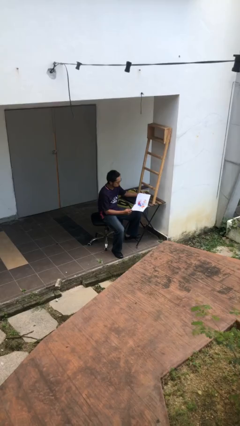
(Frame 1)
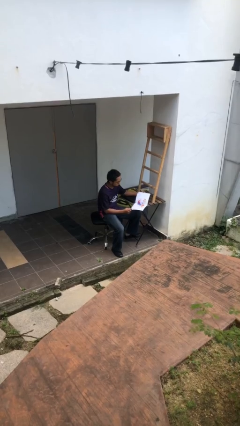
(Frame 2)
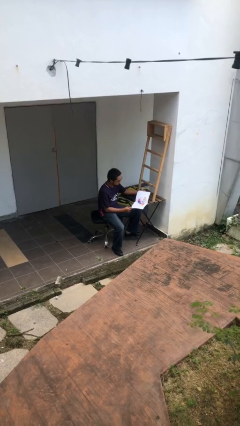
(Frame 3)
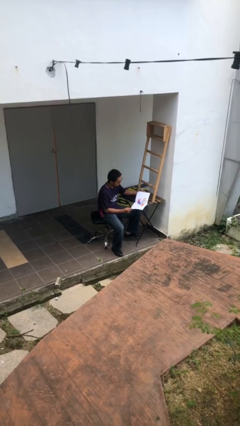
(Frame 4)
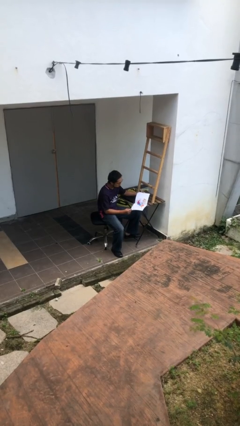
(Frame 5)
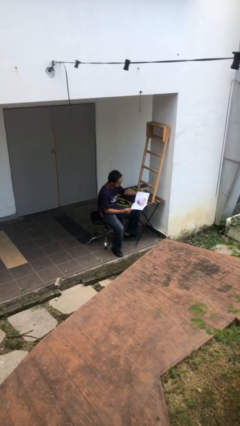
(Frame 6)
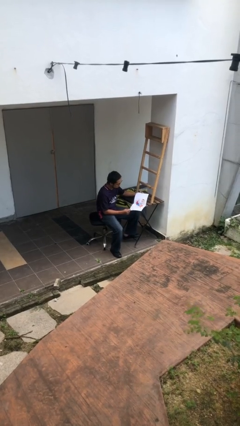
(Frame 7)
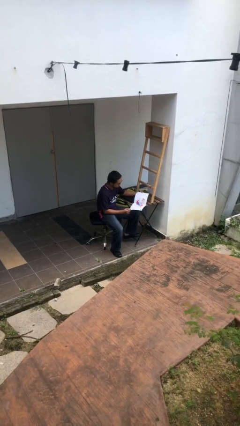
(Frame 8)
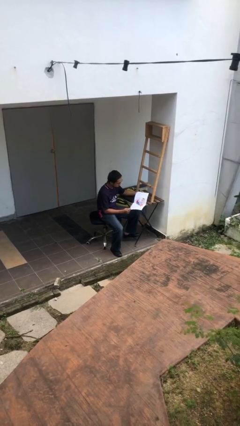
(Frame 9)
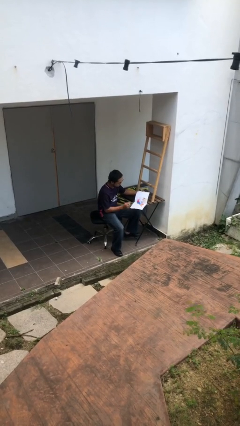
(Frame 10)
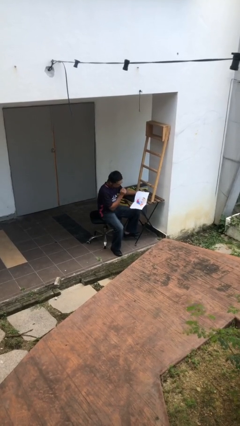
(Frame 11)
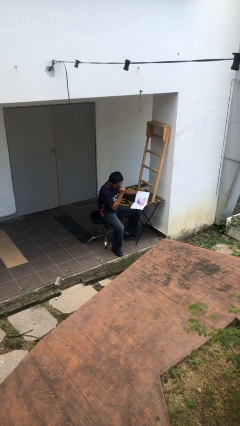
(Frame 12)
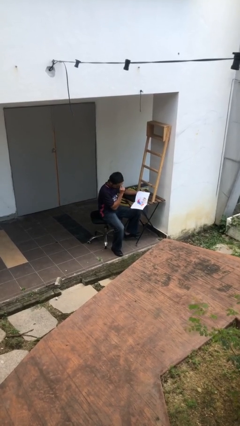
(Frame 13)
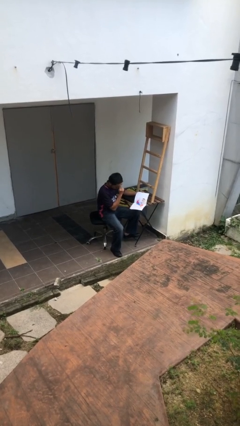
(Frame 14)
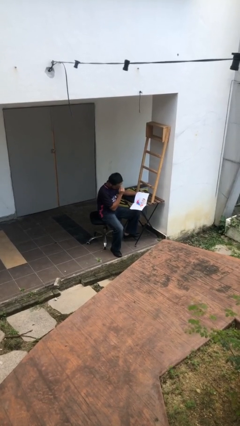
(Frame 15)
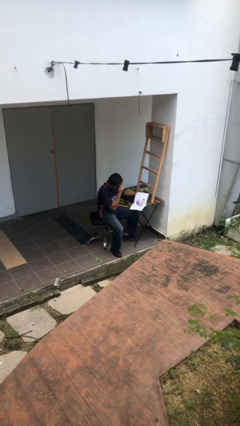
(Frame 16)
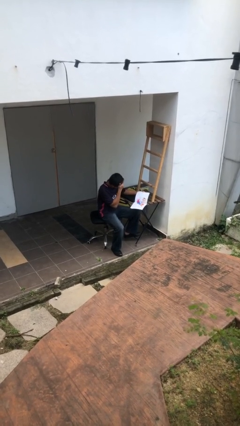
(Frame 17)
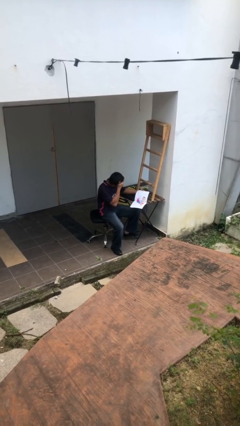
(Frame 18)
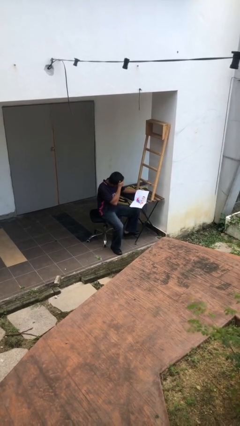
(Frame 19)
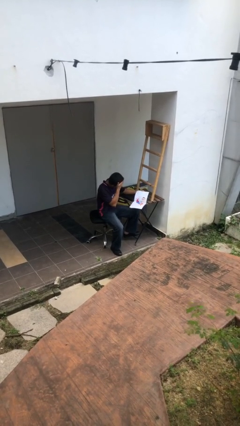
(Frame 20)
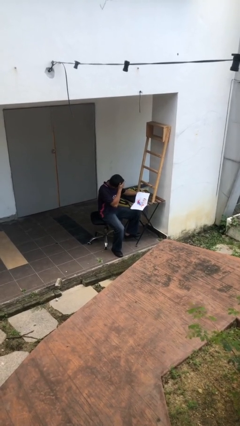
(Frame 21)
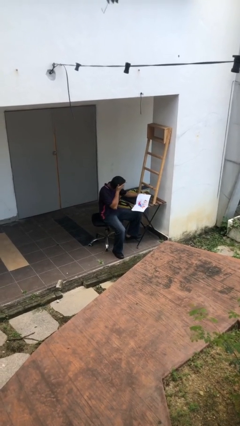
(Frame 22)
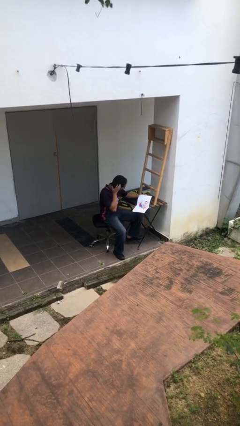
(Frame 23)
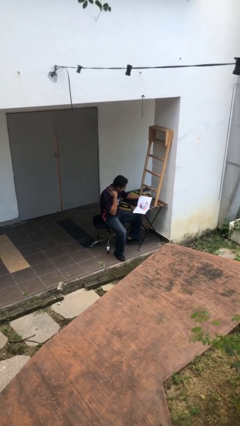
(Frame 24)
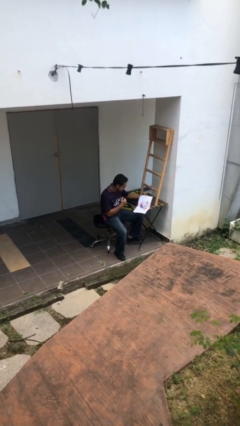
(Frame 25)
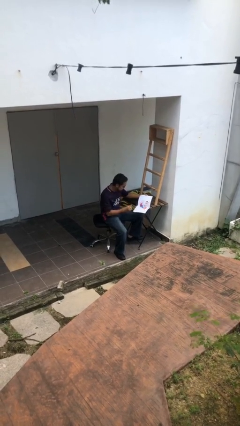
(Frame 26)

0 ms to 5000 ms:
person reads document

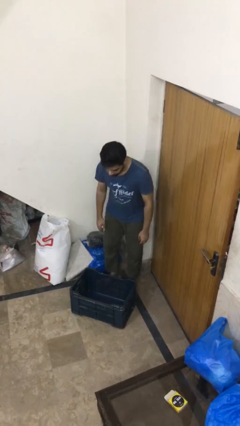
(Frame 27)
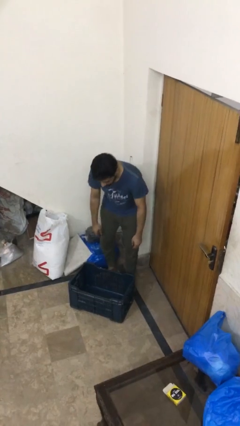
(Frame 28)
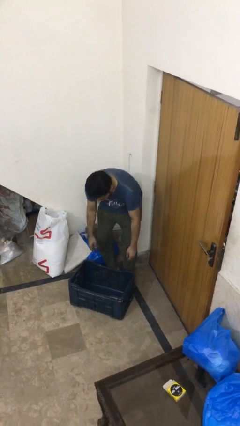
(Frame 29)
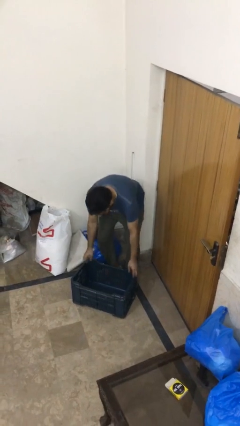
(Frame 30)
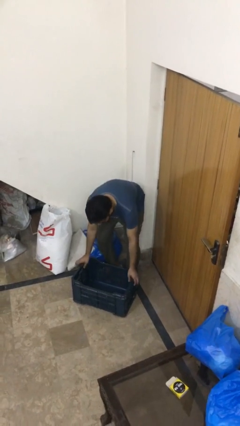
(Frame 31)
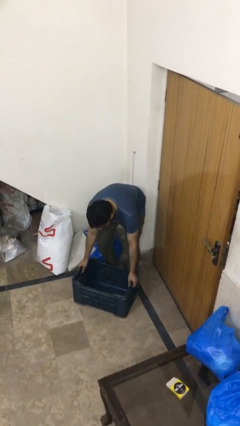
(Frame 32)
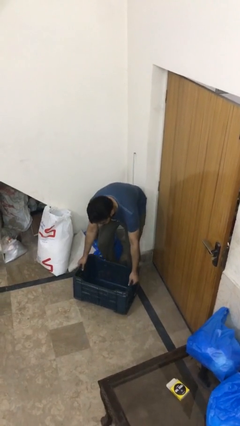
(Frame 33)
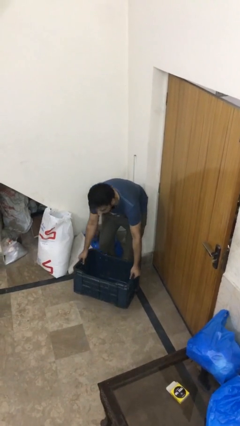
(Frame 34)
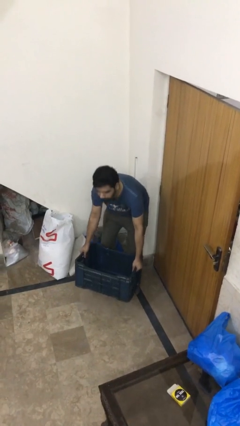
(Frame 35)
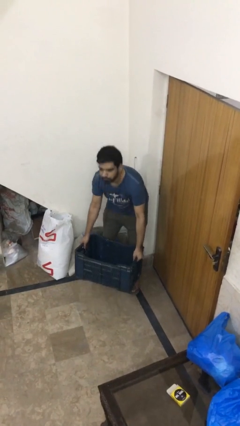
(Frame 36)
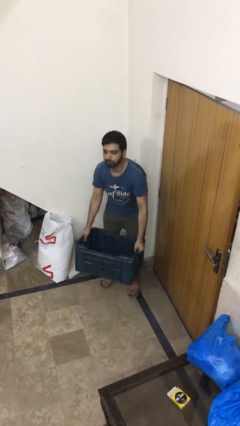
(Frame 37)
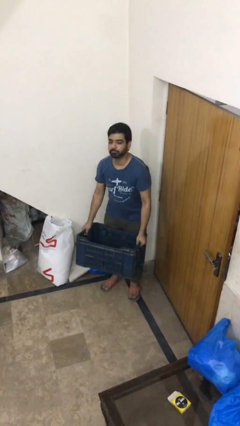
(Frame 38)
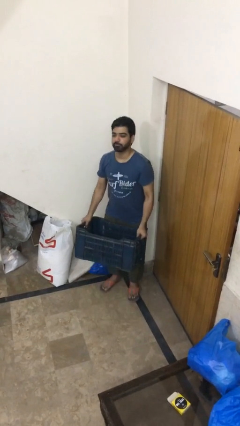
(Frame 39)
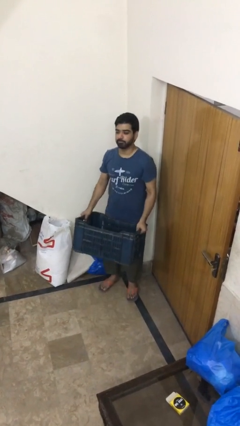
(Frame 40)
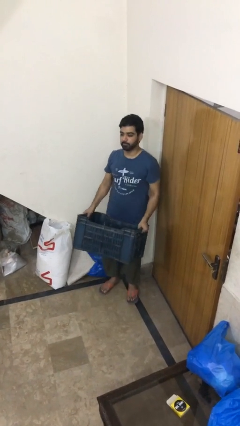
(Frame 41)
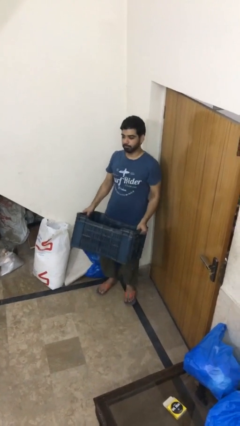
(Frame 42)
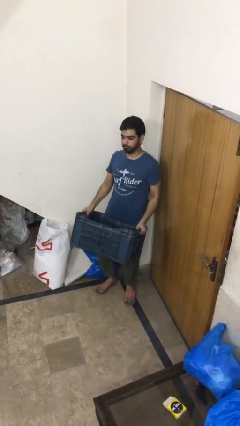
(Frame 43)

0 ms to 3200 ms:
person picks up object from floor

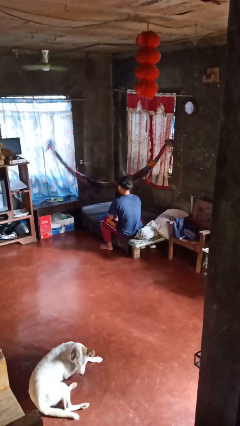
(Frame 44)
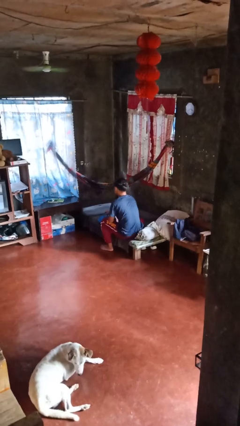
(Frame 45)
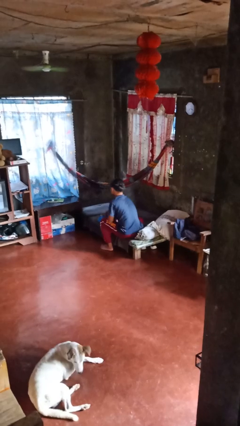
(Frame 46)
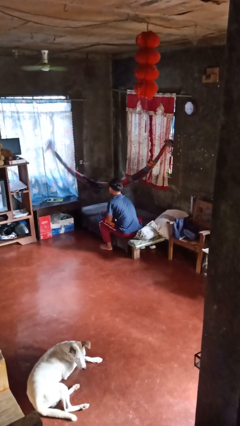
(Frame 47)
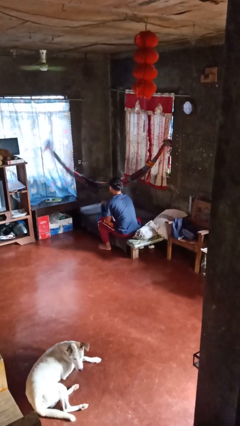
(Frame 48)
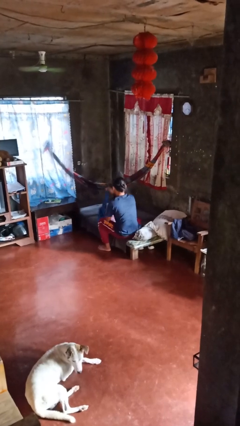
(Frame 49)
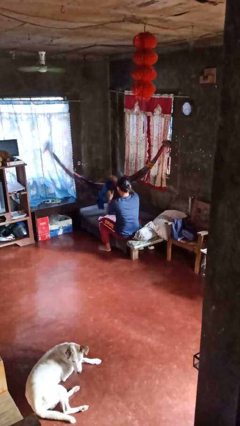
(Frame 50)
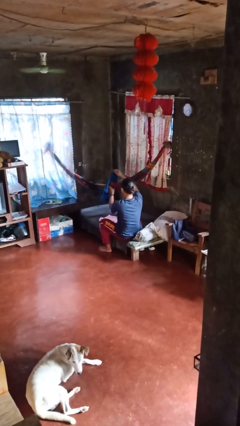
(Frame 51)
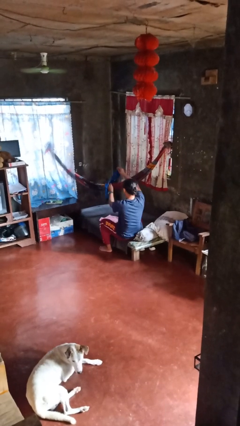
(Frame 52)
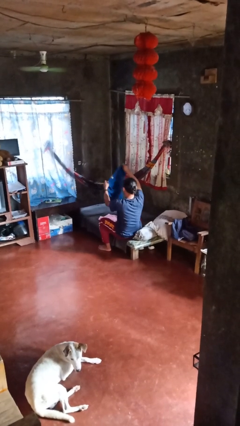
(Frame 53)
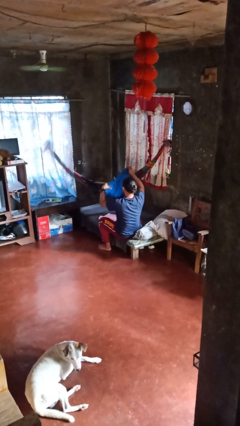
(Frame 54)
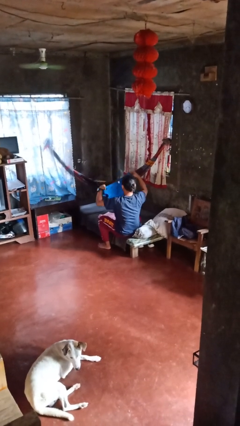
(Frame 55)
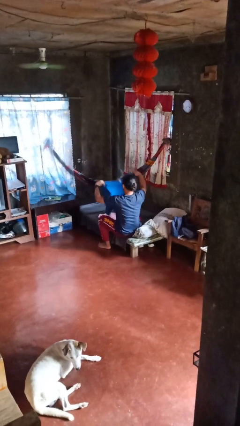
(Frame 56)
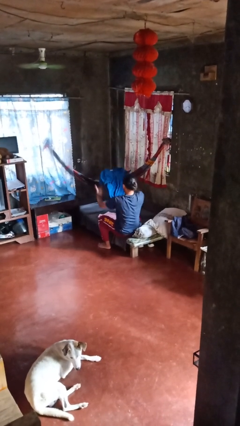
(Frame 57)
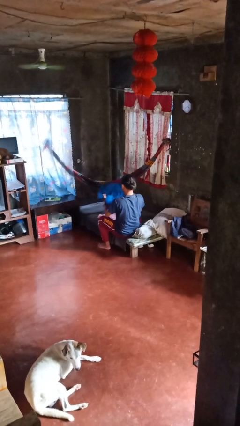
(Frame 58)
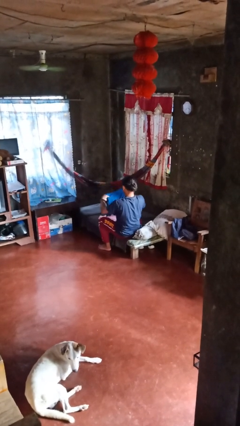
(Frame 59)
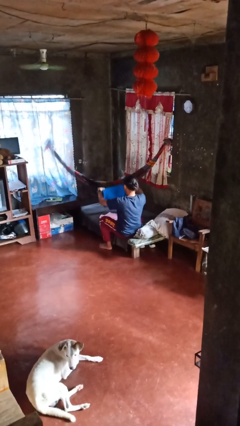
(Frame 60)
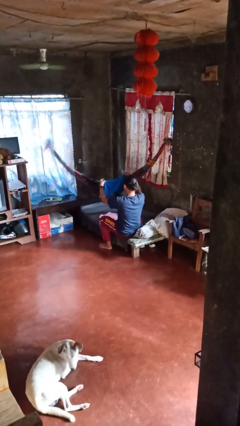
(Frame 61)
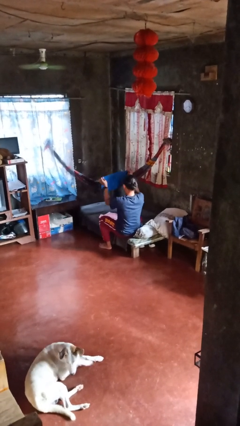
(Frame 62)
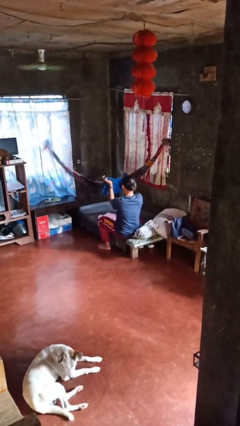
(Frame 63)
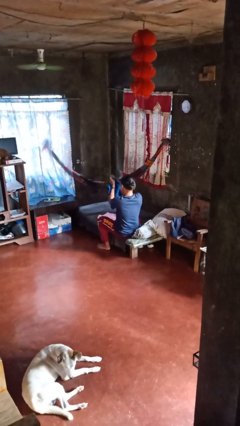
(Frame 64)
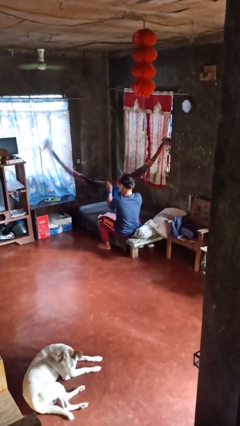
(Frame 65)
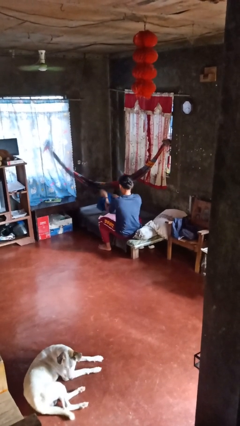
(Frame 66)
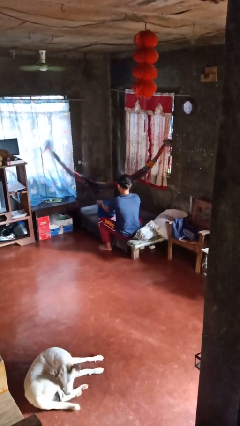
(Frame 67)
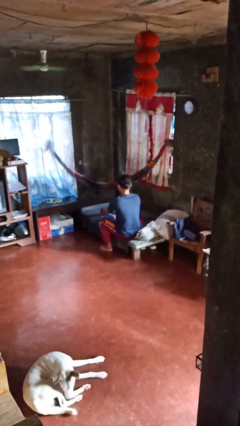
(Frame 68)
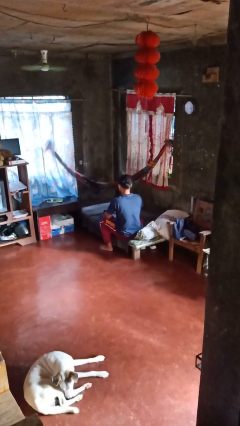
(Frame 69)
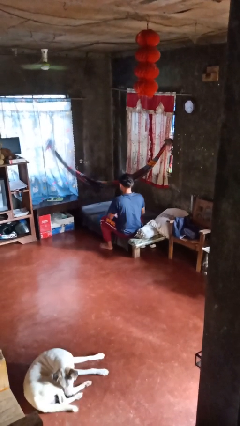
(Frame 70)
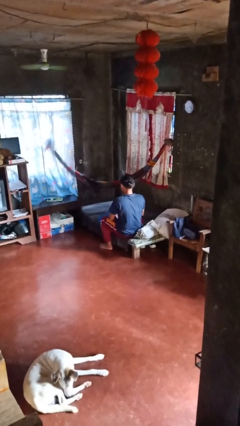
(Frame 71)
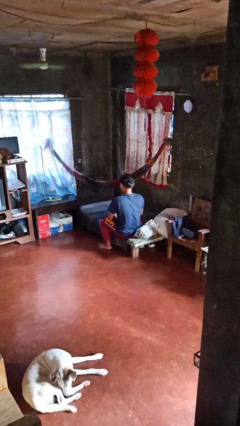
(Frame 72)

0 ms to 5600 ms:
person folds shirt

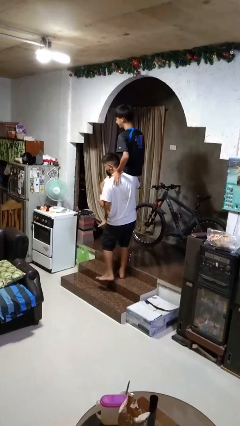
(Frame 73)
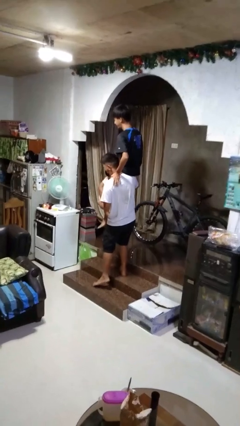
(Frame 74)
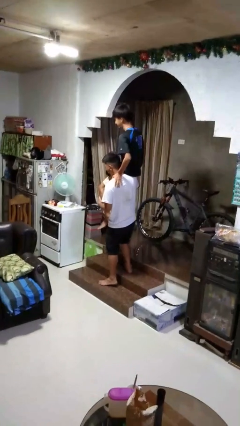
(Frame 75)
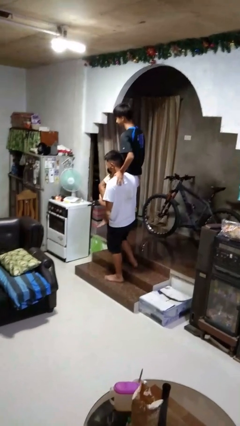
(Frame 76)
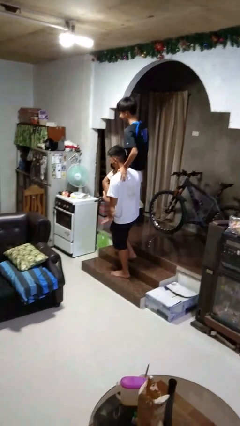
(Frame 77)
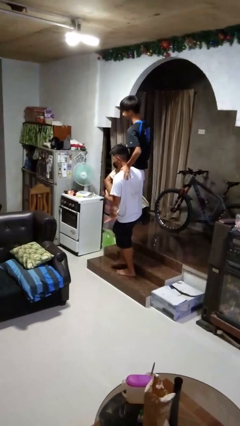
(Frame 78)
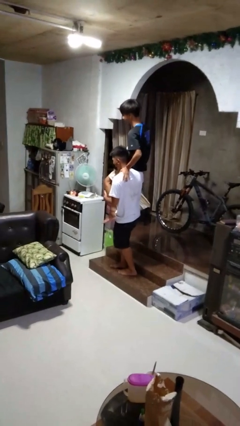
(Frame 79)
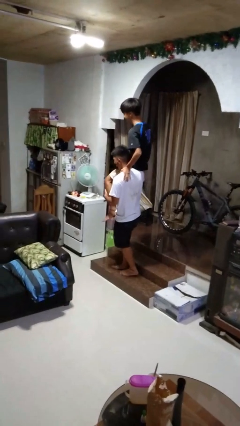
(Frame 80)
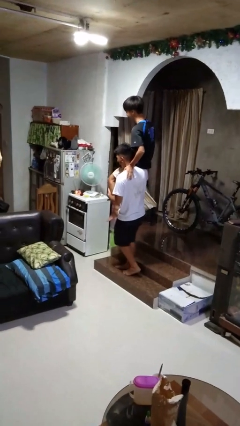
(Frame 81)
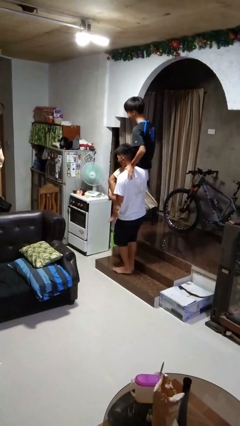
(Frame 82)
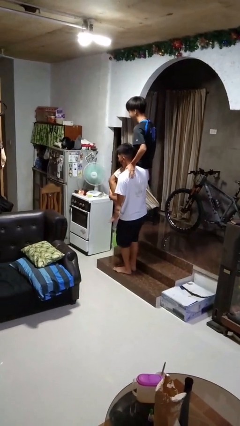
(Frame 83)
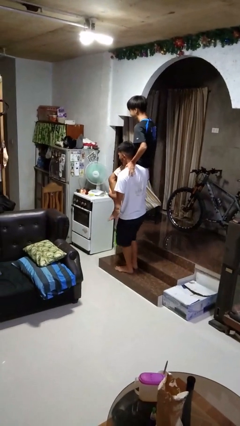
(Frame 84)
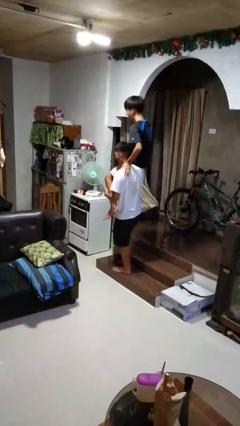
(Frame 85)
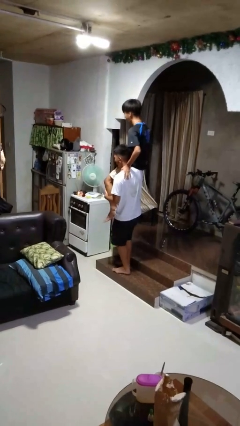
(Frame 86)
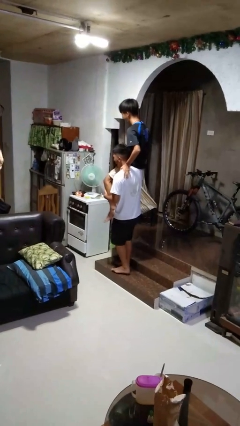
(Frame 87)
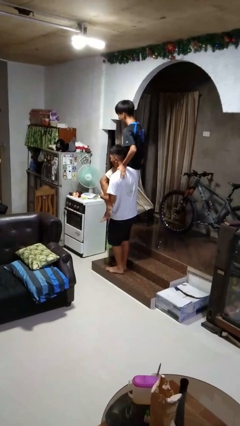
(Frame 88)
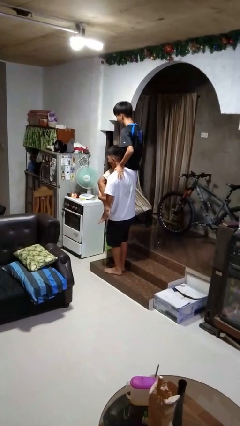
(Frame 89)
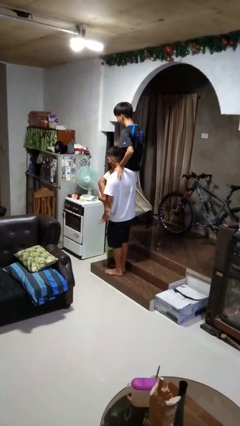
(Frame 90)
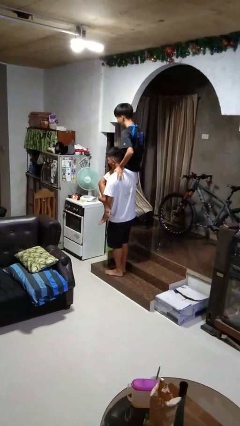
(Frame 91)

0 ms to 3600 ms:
person carries person on shoulders

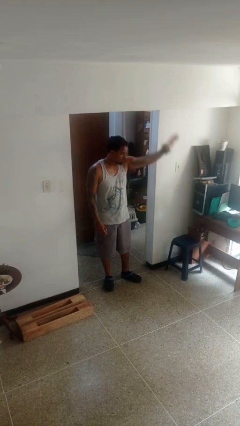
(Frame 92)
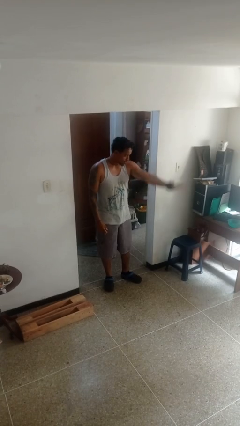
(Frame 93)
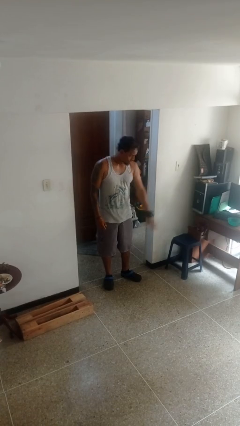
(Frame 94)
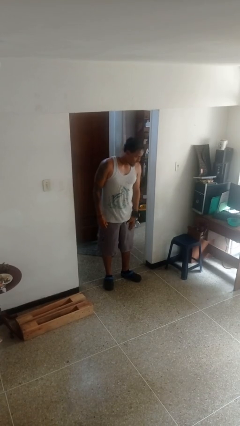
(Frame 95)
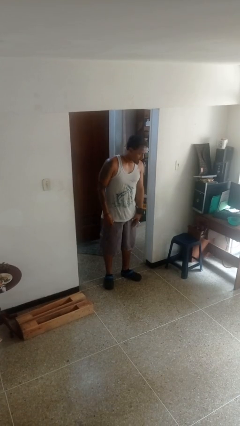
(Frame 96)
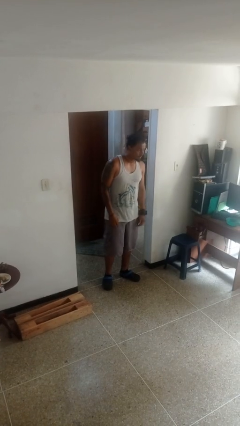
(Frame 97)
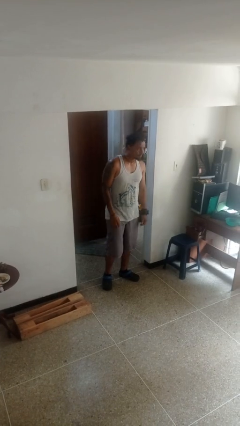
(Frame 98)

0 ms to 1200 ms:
person gestures swipe down
